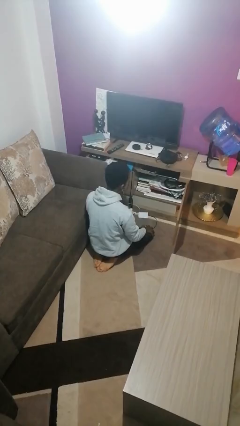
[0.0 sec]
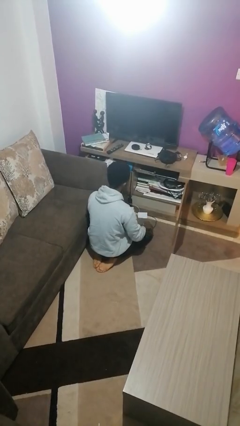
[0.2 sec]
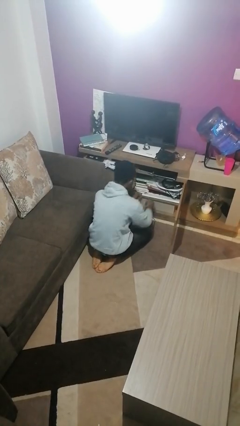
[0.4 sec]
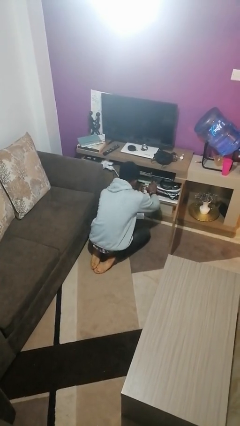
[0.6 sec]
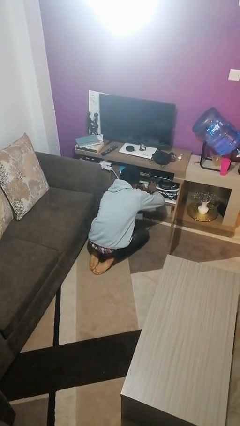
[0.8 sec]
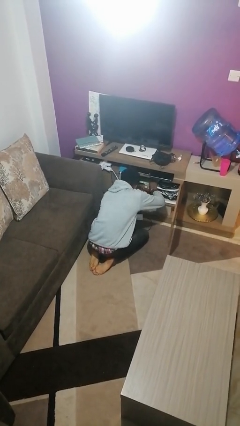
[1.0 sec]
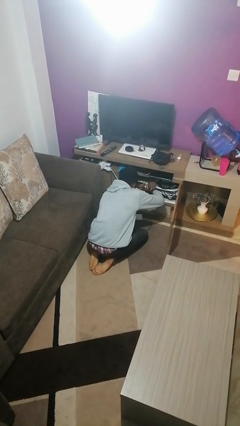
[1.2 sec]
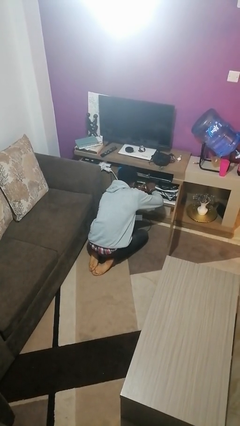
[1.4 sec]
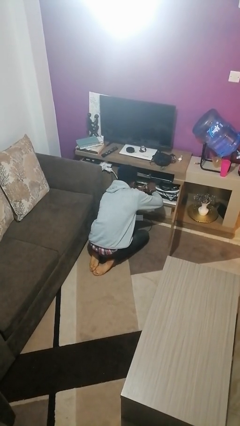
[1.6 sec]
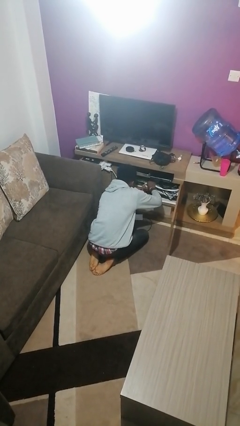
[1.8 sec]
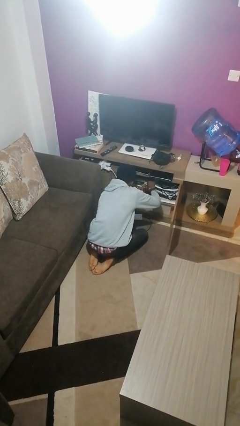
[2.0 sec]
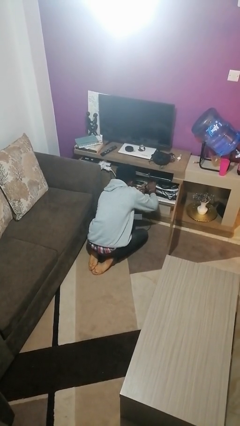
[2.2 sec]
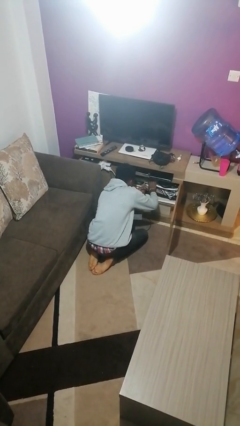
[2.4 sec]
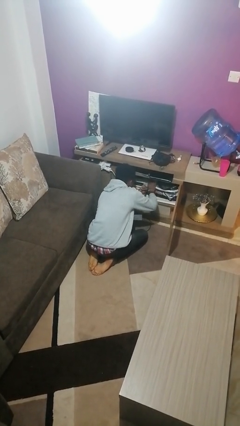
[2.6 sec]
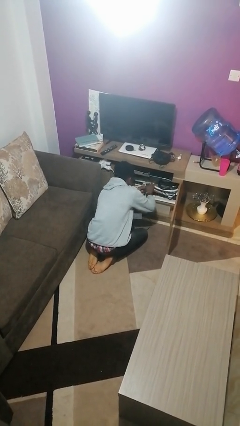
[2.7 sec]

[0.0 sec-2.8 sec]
person searches in cabinet

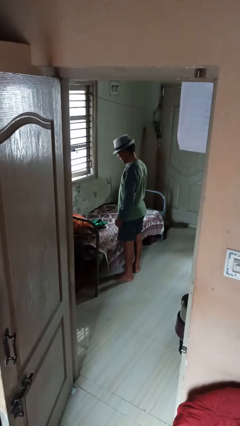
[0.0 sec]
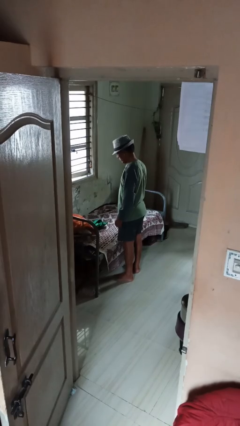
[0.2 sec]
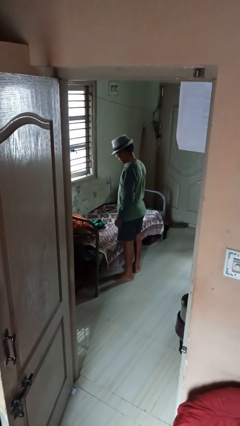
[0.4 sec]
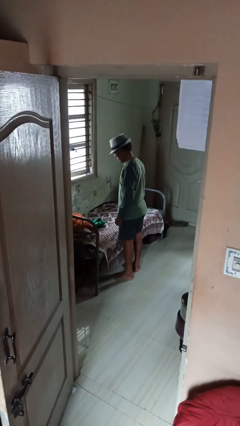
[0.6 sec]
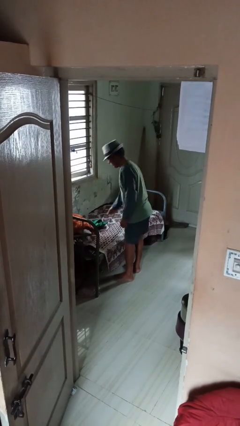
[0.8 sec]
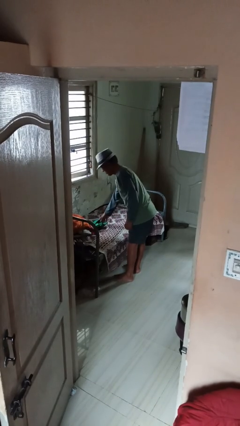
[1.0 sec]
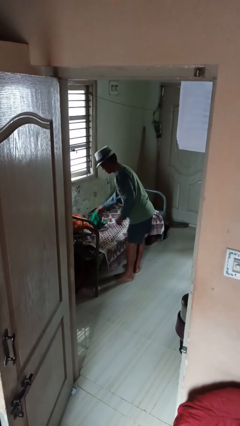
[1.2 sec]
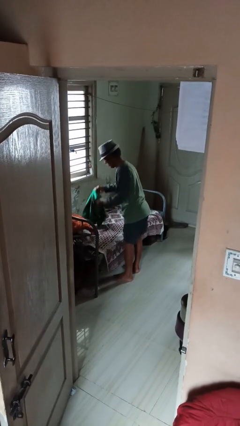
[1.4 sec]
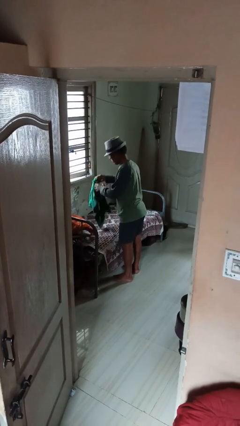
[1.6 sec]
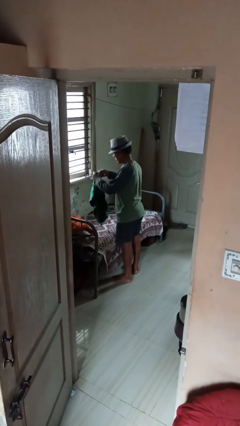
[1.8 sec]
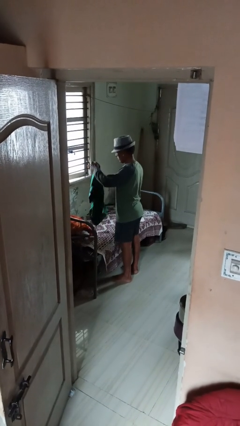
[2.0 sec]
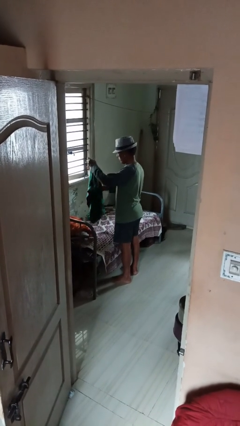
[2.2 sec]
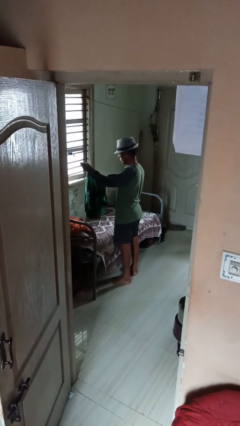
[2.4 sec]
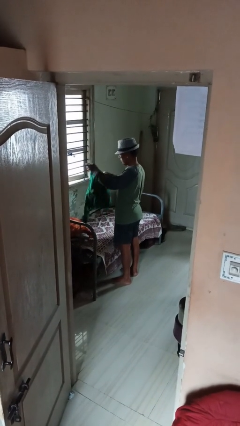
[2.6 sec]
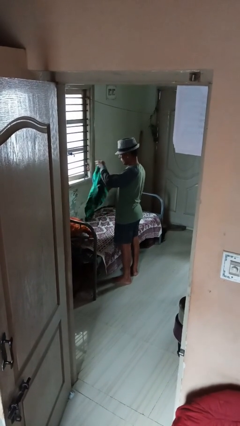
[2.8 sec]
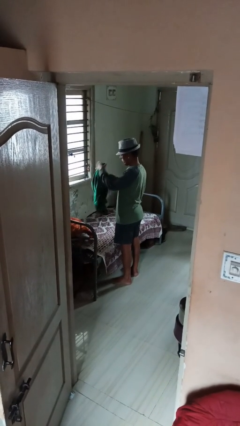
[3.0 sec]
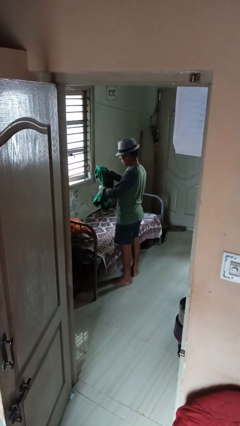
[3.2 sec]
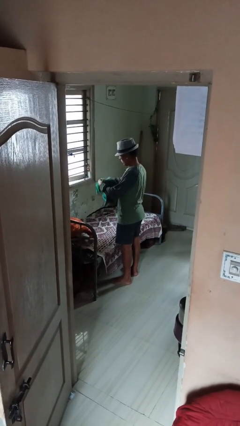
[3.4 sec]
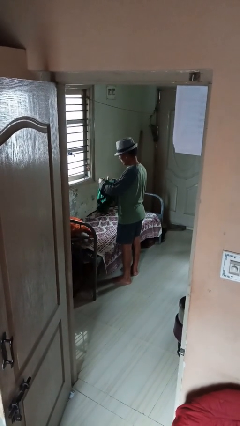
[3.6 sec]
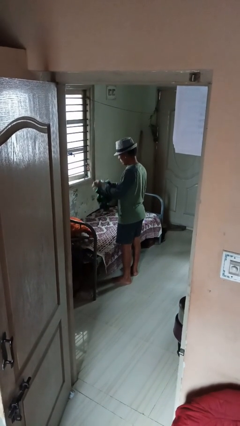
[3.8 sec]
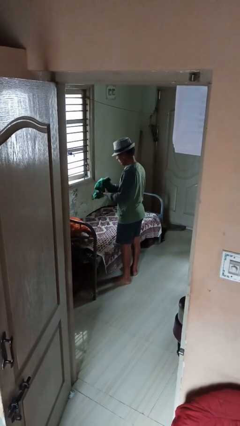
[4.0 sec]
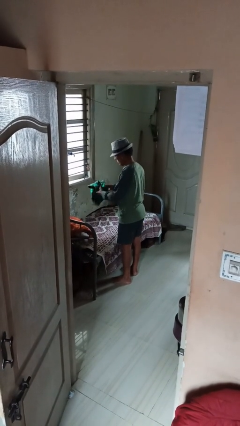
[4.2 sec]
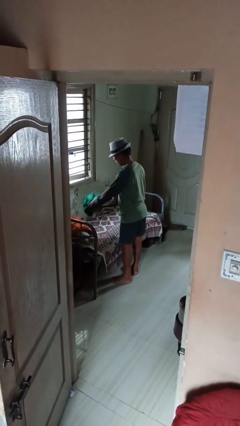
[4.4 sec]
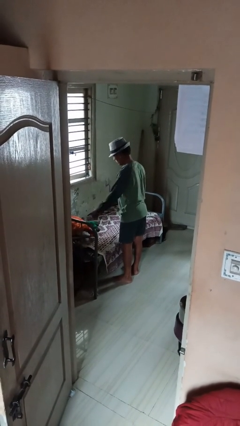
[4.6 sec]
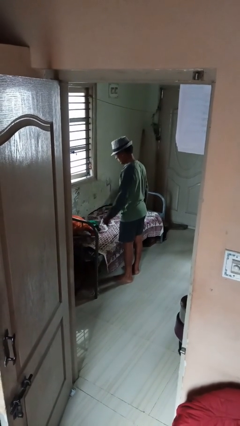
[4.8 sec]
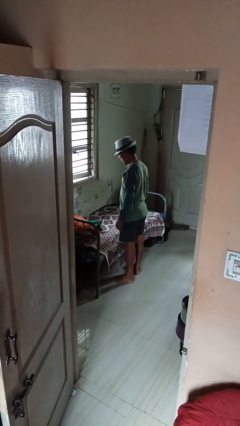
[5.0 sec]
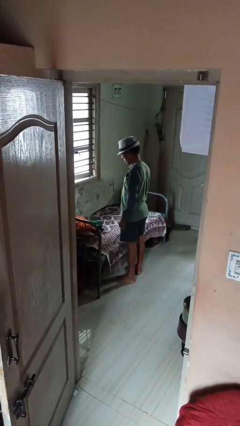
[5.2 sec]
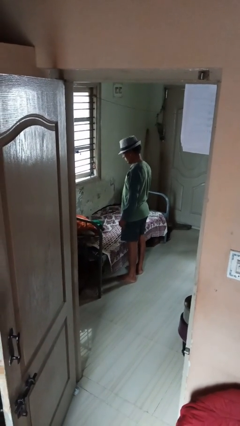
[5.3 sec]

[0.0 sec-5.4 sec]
person folds shirt

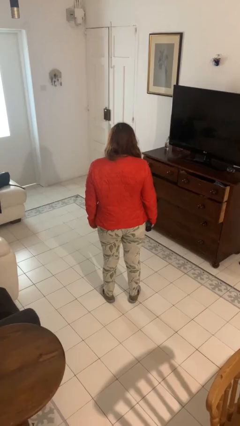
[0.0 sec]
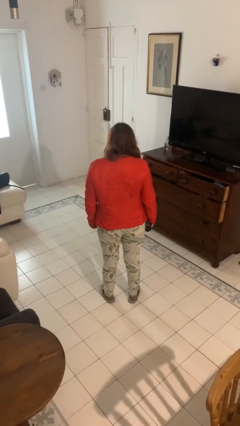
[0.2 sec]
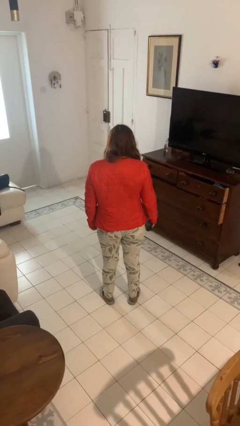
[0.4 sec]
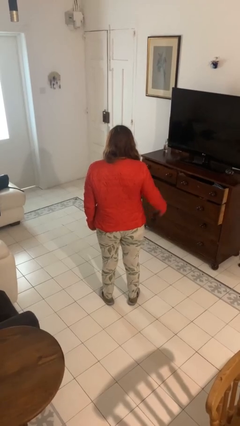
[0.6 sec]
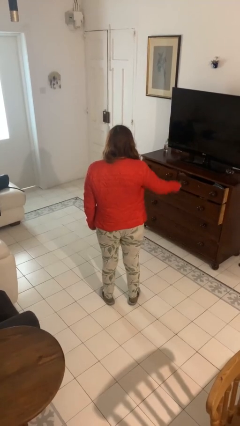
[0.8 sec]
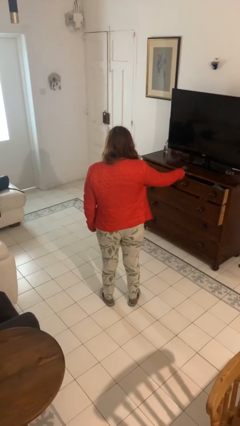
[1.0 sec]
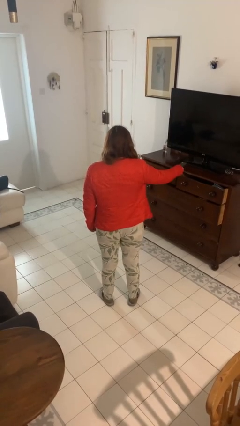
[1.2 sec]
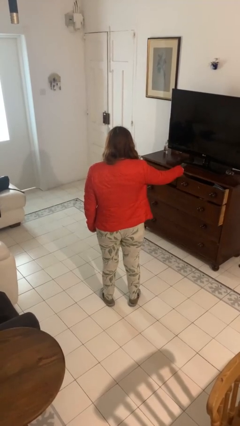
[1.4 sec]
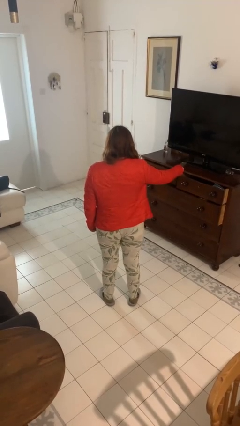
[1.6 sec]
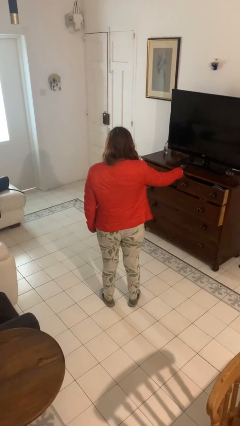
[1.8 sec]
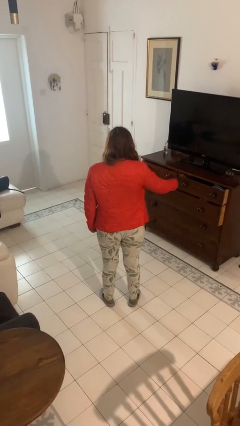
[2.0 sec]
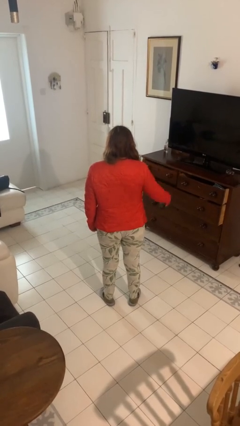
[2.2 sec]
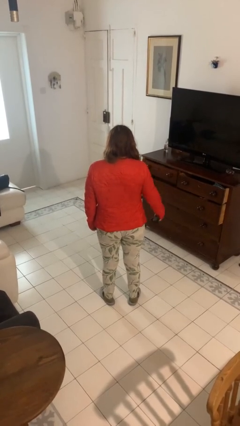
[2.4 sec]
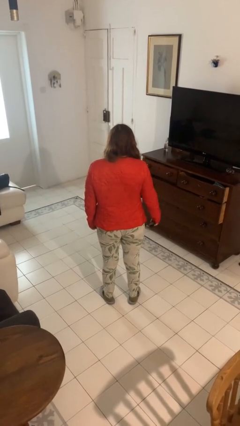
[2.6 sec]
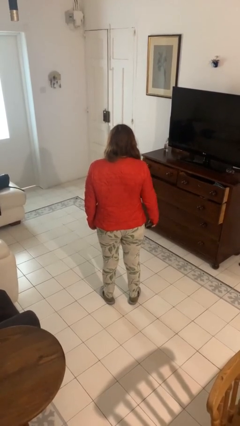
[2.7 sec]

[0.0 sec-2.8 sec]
person uses television remote

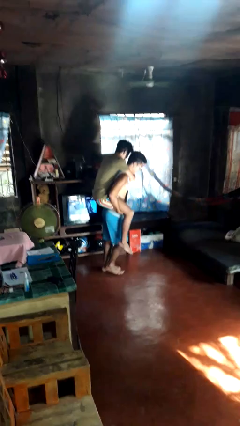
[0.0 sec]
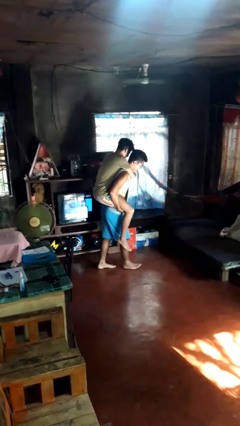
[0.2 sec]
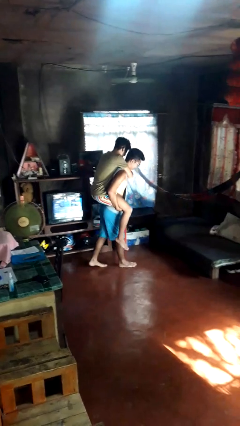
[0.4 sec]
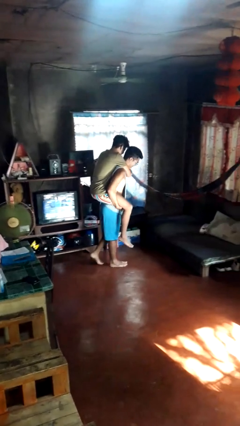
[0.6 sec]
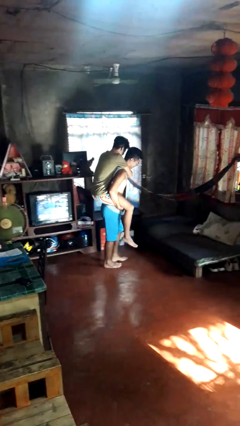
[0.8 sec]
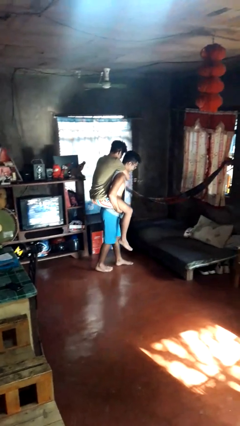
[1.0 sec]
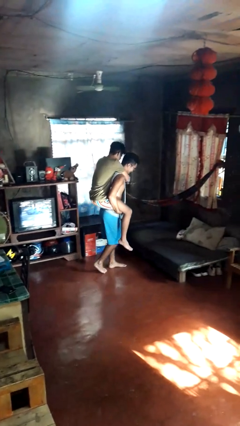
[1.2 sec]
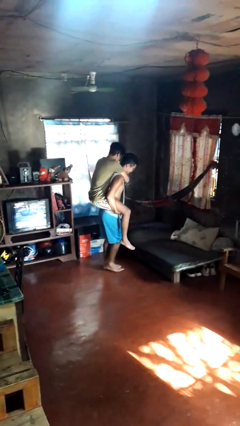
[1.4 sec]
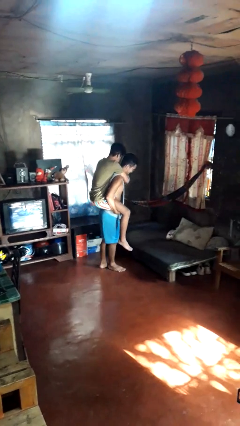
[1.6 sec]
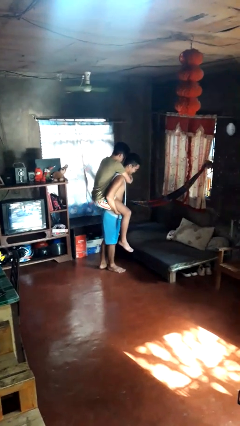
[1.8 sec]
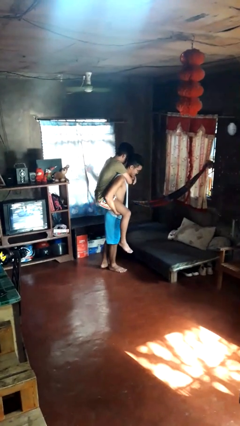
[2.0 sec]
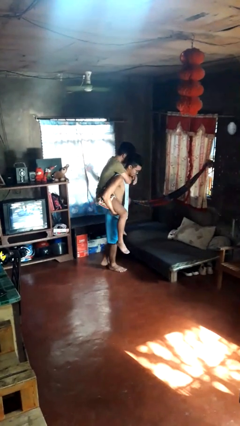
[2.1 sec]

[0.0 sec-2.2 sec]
person carries person on back

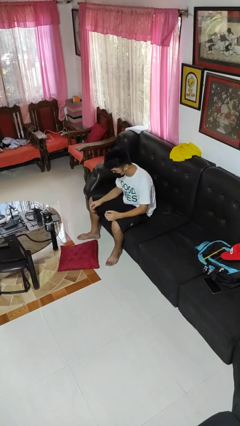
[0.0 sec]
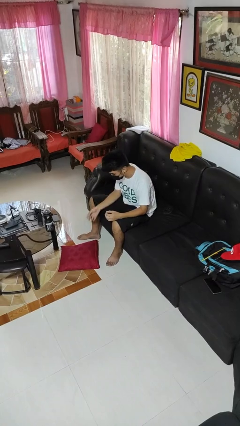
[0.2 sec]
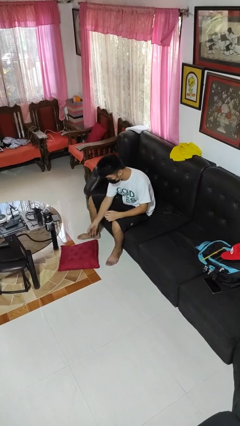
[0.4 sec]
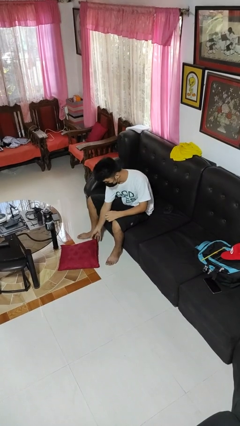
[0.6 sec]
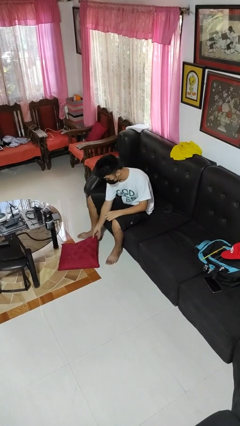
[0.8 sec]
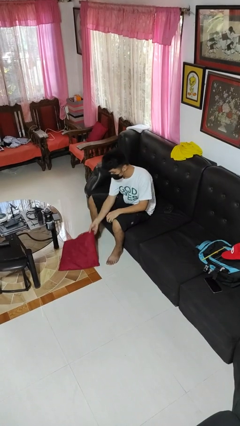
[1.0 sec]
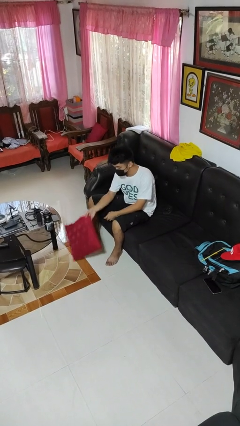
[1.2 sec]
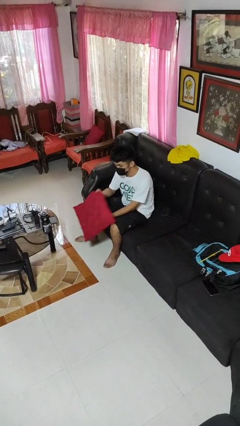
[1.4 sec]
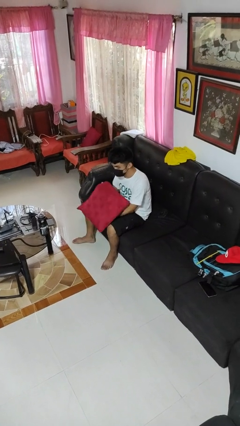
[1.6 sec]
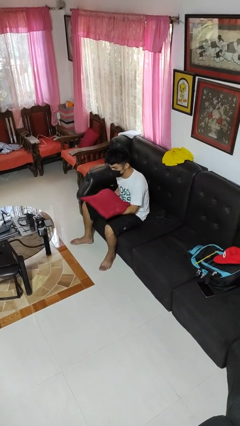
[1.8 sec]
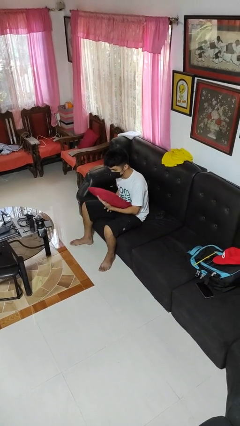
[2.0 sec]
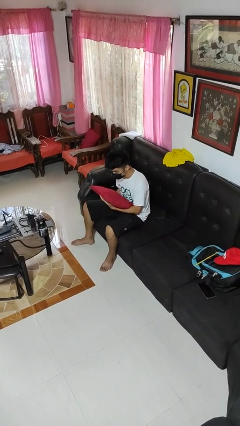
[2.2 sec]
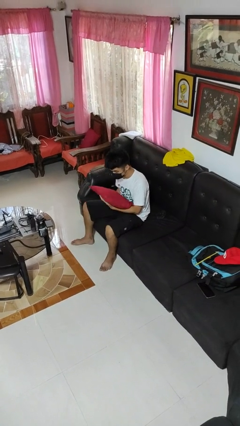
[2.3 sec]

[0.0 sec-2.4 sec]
person picks up object from floor

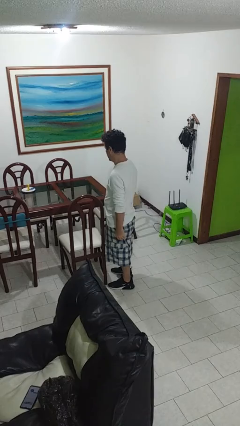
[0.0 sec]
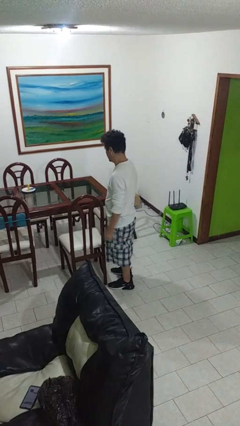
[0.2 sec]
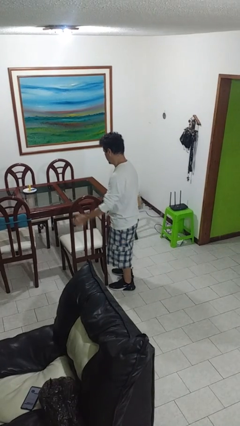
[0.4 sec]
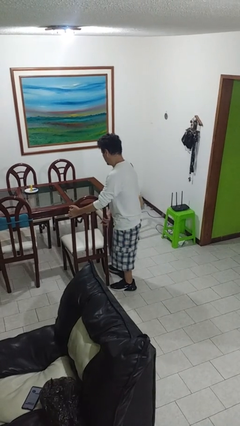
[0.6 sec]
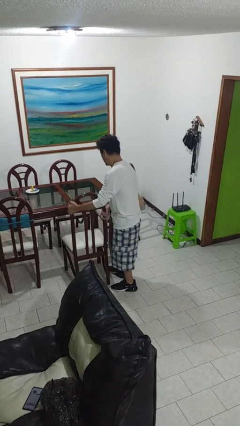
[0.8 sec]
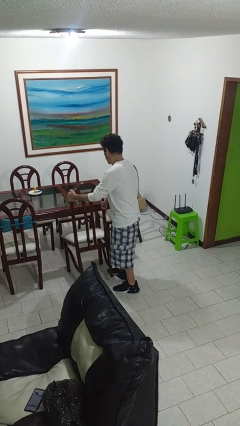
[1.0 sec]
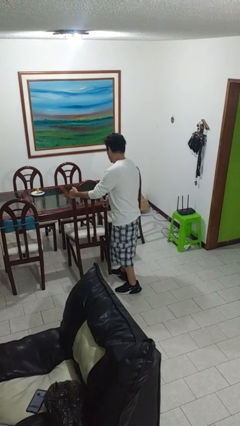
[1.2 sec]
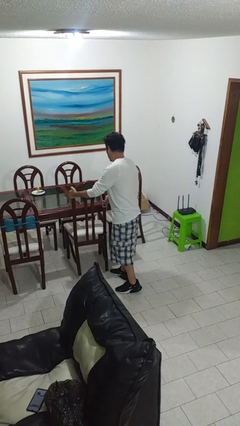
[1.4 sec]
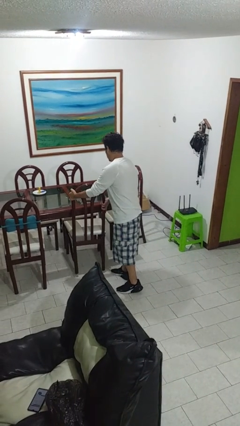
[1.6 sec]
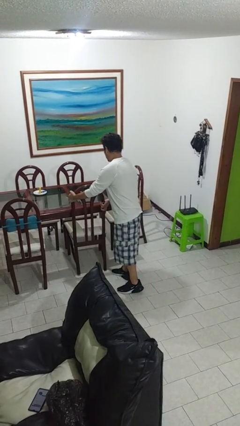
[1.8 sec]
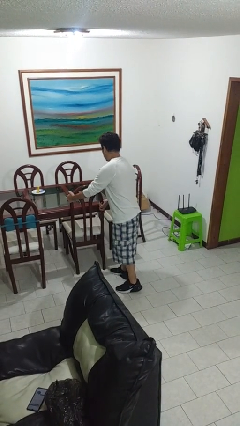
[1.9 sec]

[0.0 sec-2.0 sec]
person pushes in chair
